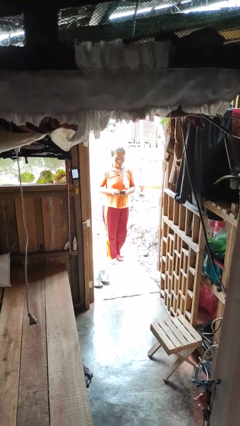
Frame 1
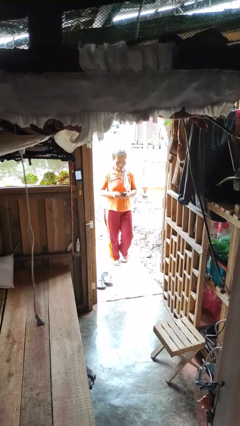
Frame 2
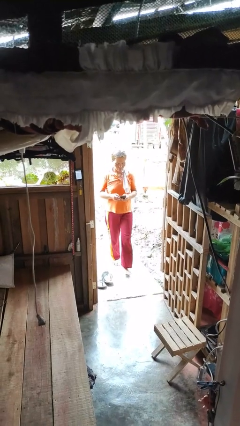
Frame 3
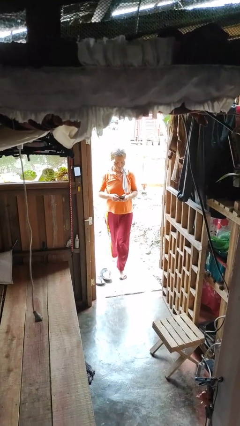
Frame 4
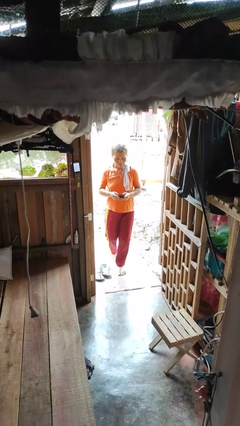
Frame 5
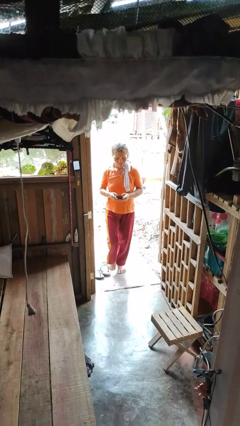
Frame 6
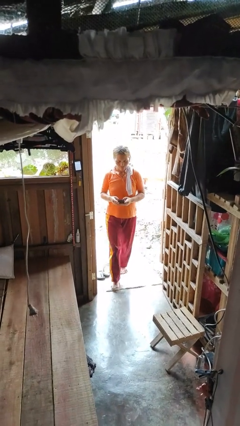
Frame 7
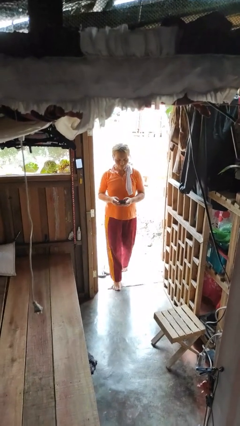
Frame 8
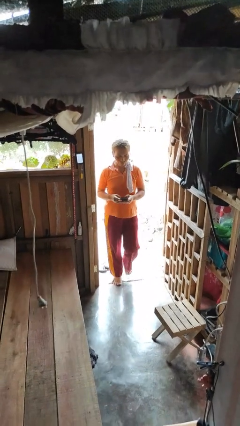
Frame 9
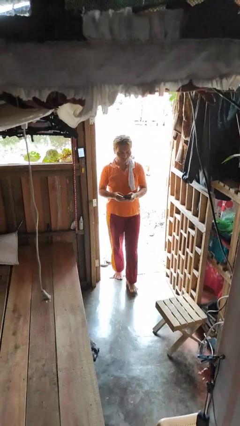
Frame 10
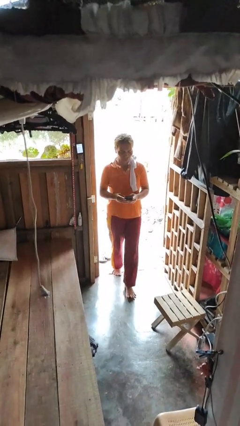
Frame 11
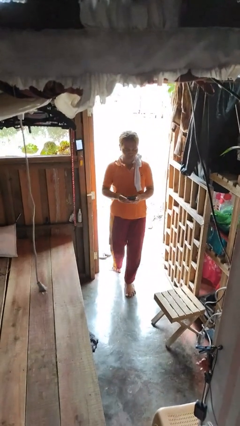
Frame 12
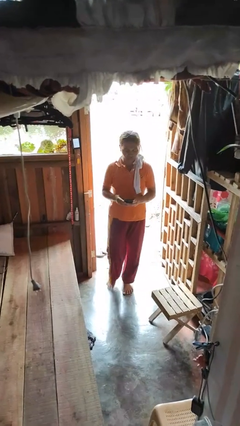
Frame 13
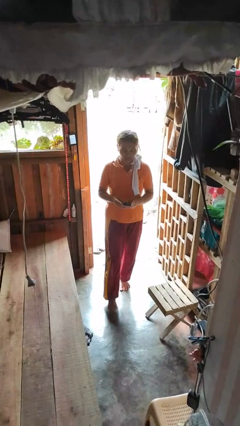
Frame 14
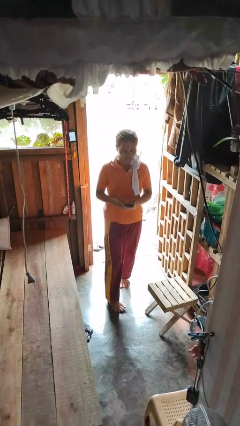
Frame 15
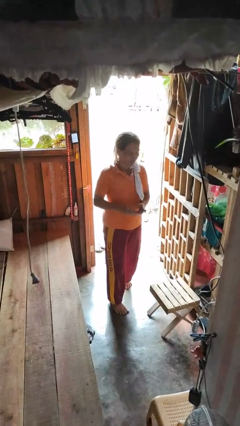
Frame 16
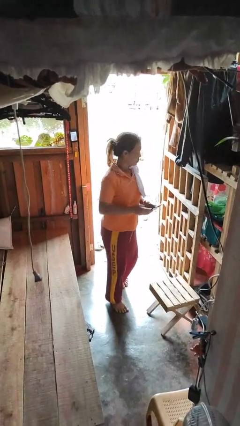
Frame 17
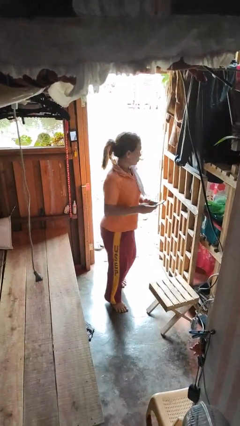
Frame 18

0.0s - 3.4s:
person enters scene through structure

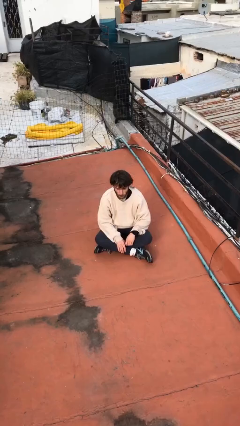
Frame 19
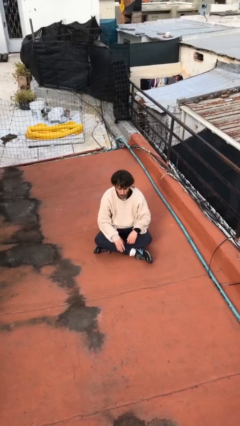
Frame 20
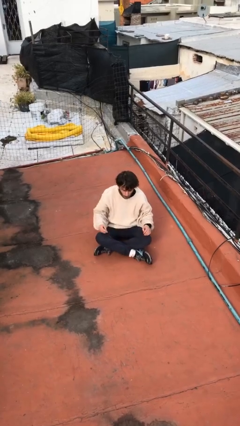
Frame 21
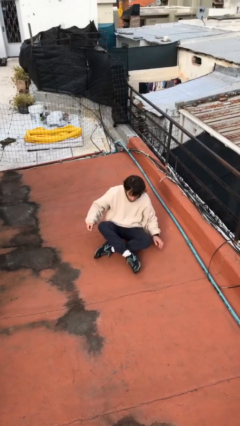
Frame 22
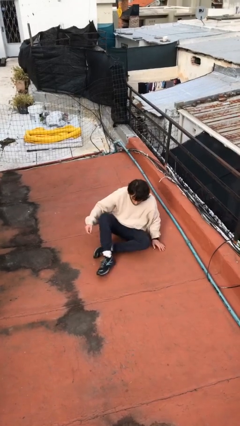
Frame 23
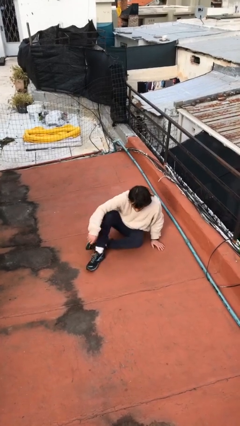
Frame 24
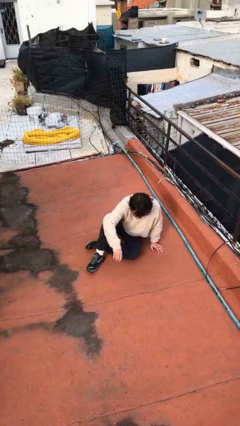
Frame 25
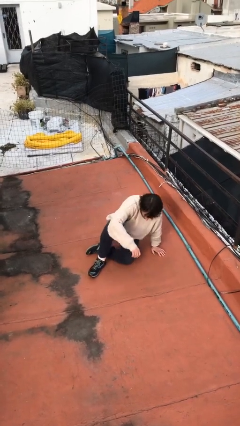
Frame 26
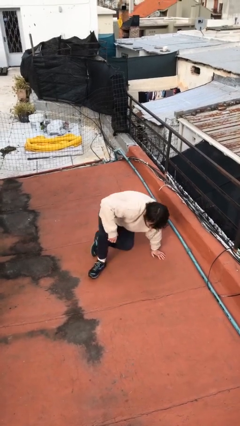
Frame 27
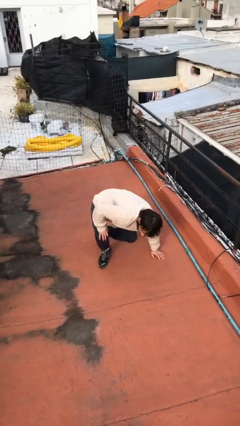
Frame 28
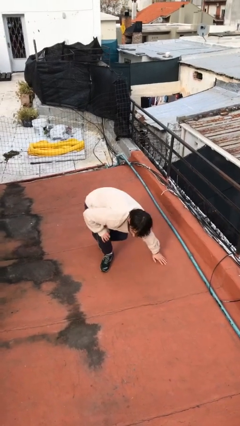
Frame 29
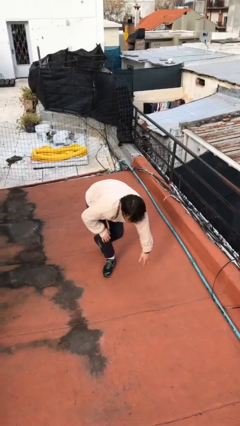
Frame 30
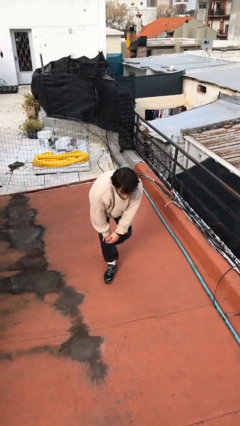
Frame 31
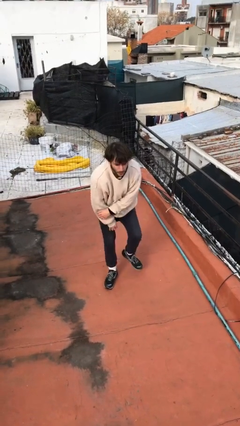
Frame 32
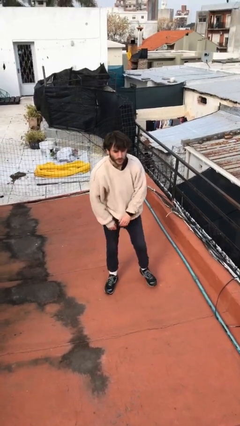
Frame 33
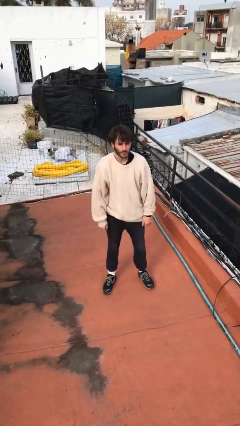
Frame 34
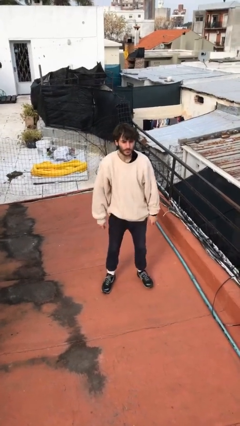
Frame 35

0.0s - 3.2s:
person stands up from floor

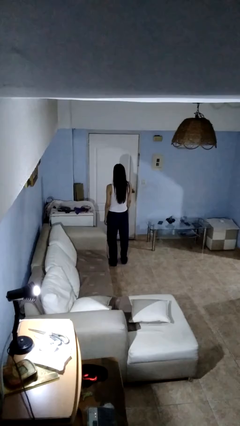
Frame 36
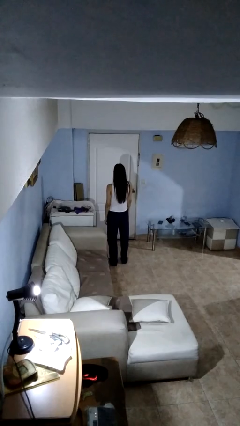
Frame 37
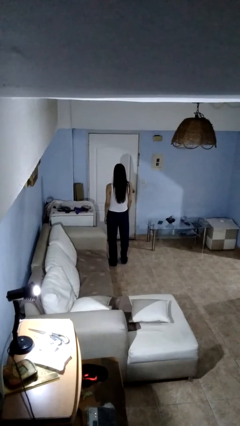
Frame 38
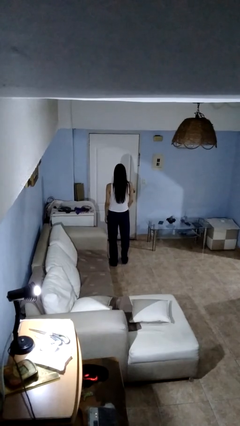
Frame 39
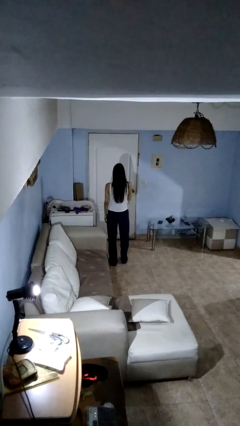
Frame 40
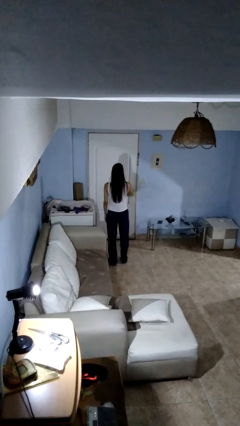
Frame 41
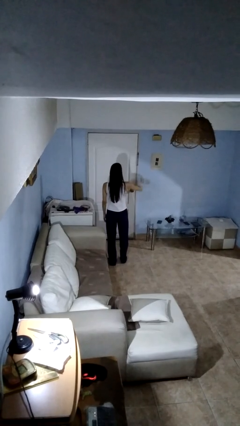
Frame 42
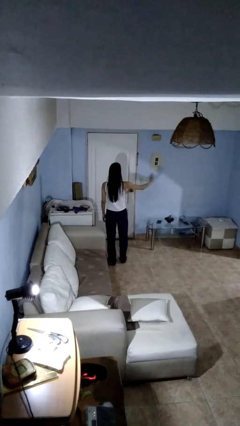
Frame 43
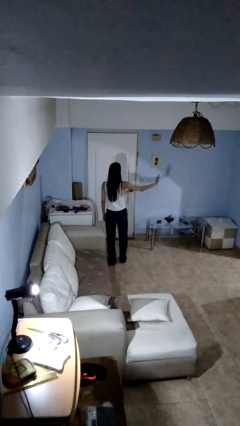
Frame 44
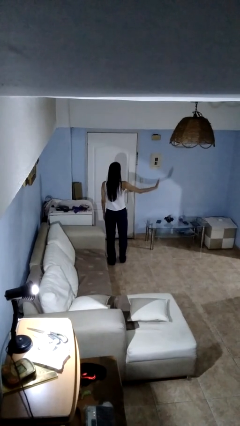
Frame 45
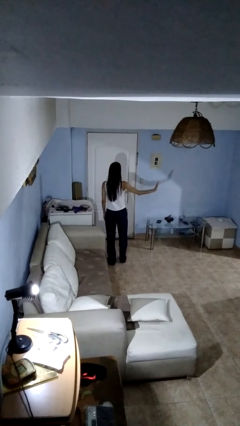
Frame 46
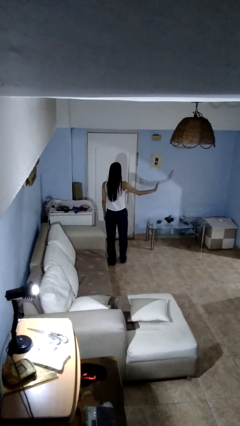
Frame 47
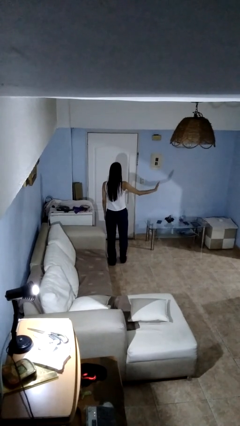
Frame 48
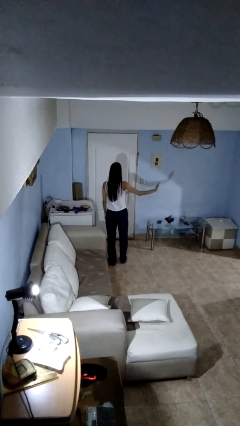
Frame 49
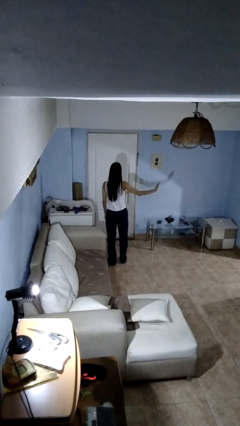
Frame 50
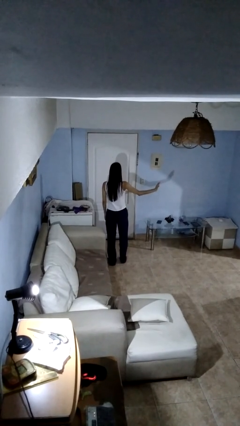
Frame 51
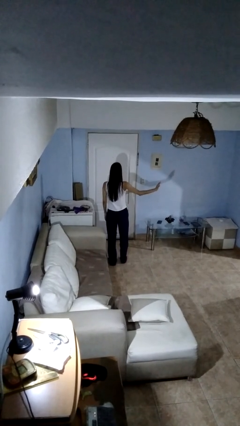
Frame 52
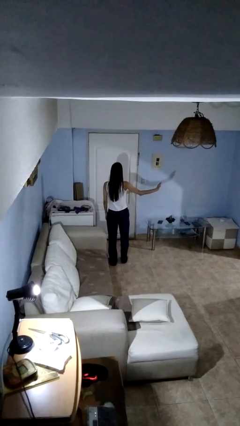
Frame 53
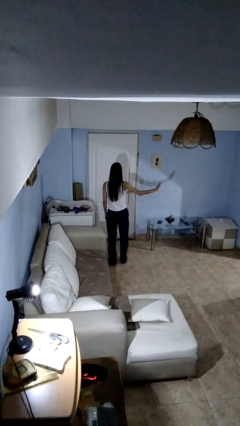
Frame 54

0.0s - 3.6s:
person gestures swipe left

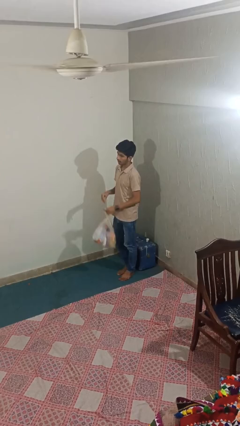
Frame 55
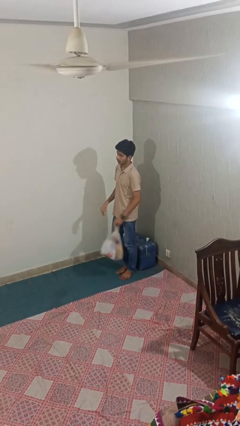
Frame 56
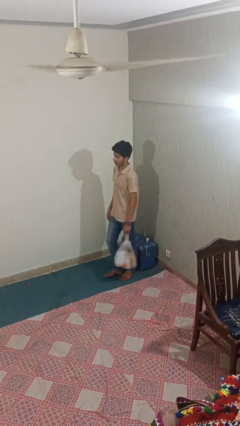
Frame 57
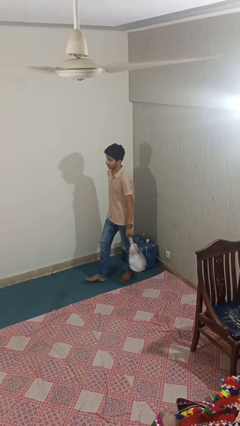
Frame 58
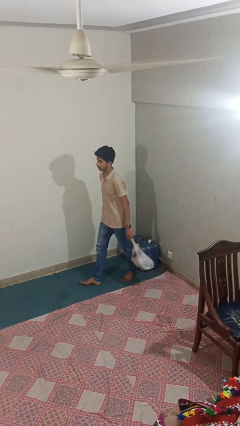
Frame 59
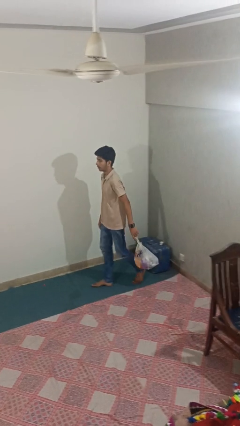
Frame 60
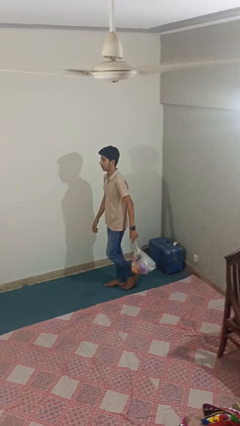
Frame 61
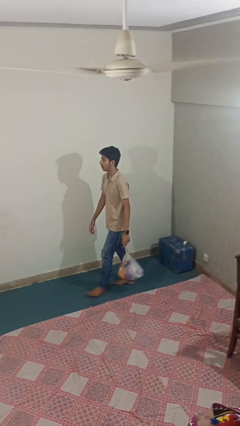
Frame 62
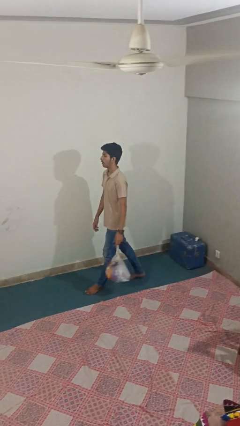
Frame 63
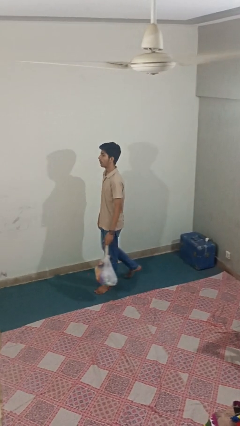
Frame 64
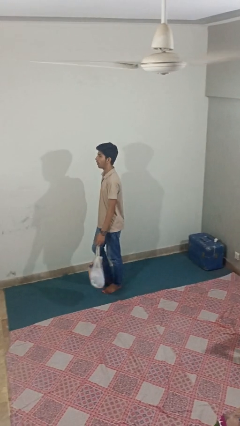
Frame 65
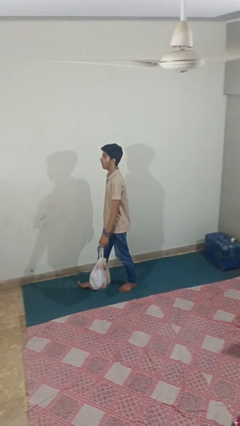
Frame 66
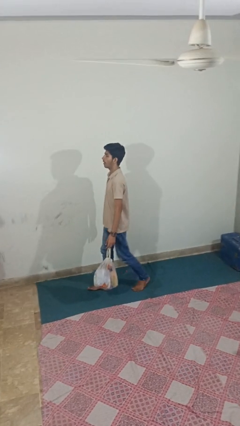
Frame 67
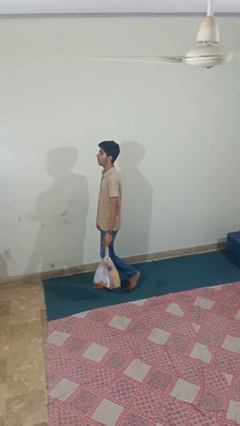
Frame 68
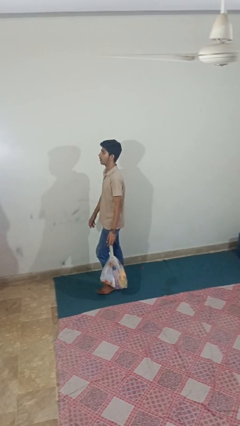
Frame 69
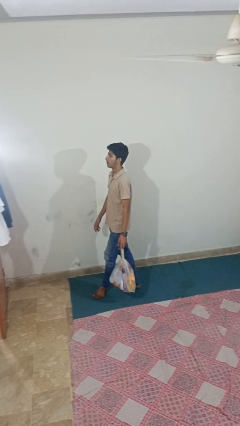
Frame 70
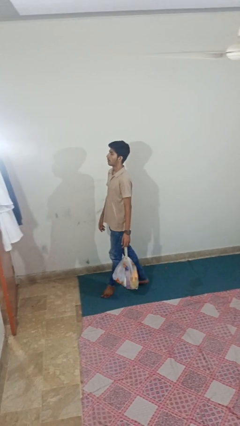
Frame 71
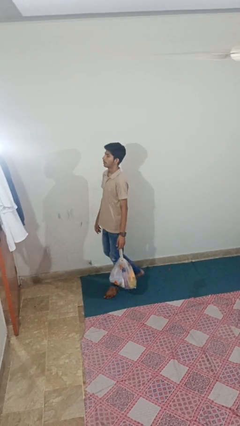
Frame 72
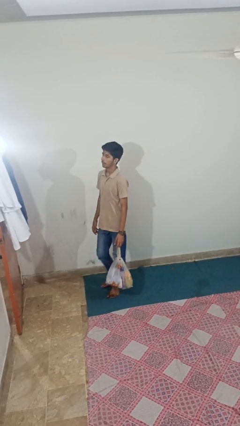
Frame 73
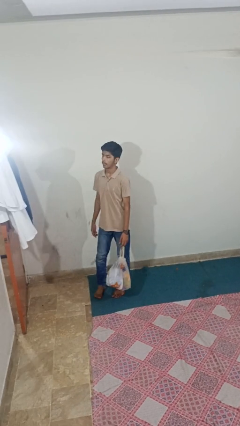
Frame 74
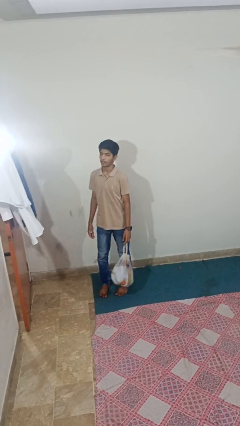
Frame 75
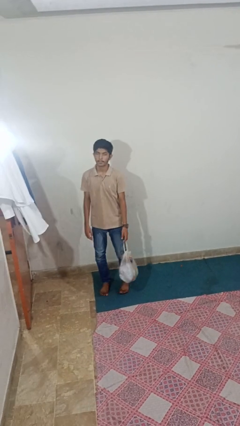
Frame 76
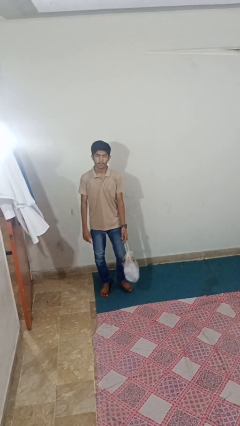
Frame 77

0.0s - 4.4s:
person carries groceries

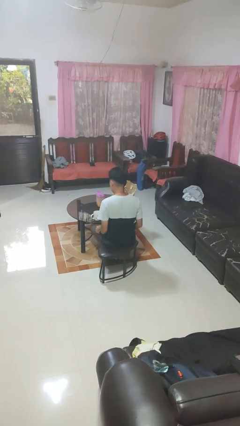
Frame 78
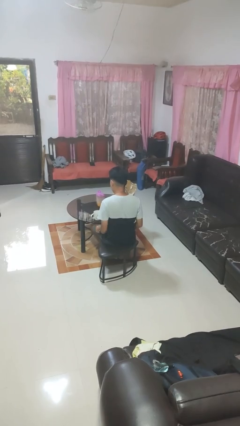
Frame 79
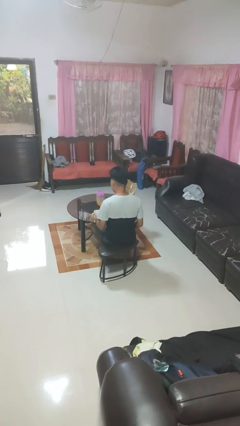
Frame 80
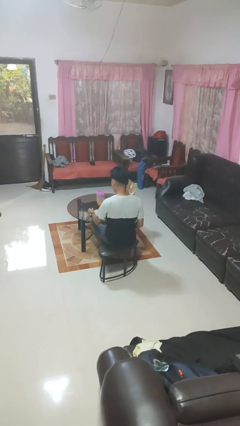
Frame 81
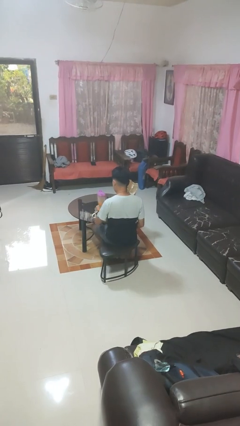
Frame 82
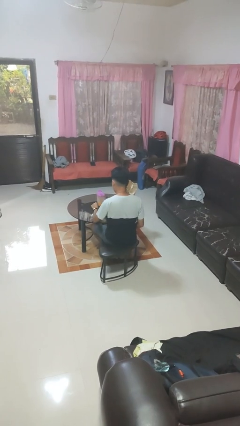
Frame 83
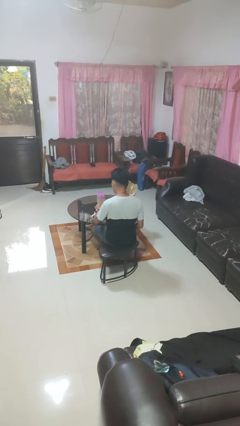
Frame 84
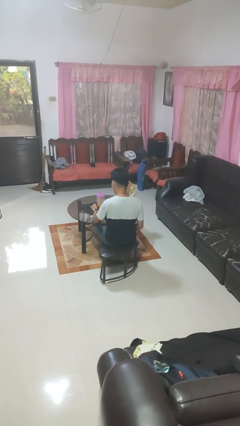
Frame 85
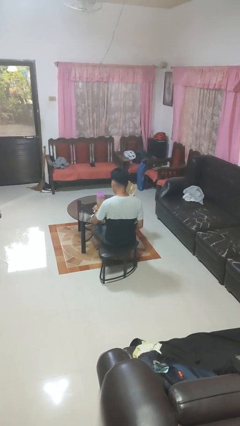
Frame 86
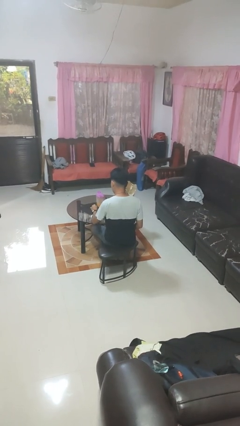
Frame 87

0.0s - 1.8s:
person stirs mug

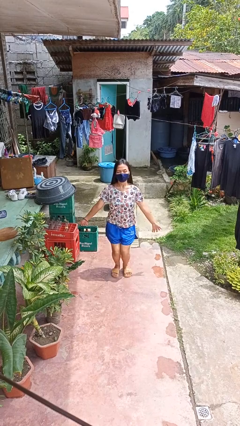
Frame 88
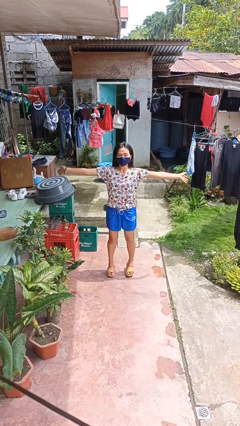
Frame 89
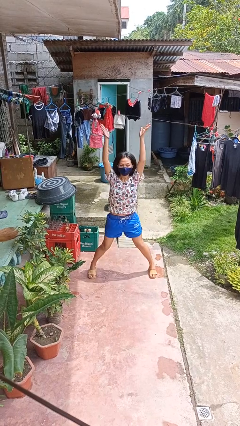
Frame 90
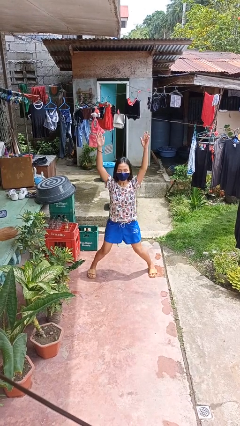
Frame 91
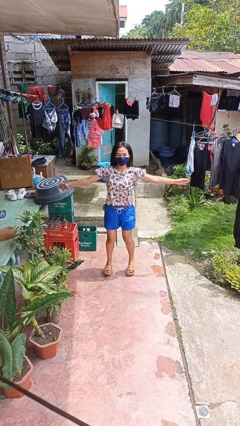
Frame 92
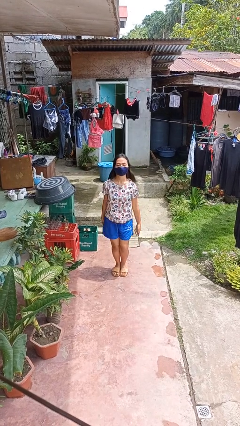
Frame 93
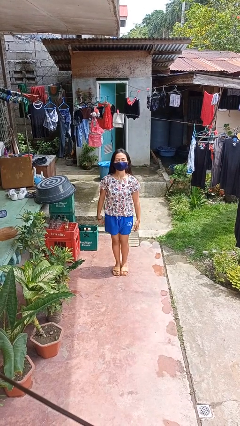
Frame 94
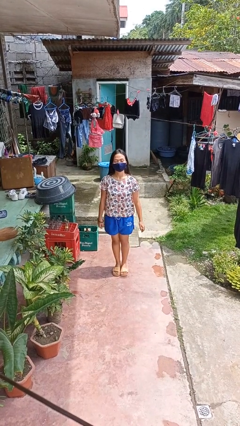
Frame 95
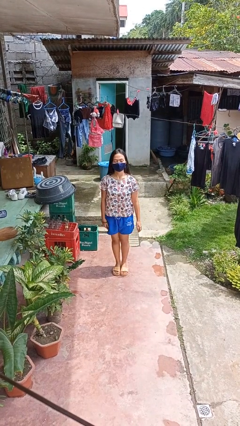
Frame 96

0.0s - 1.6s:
person exercises with jumping jacks
